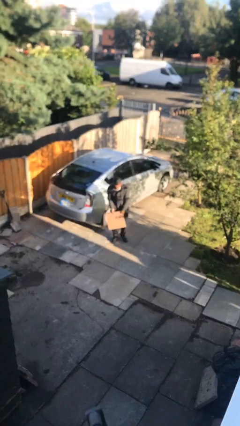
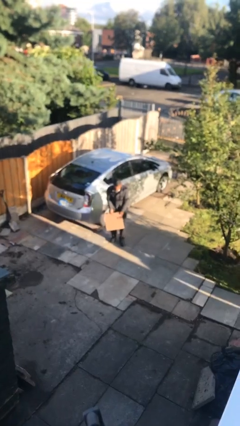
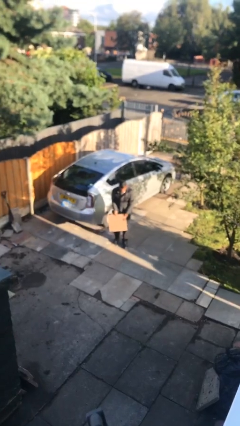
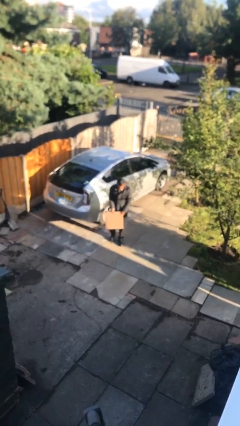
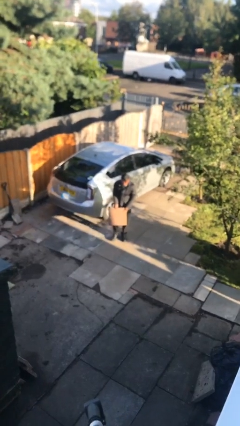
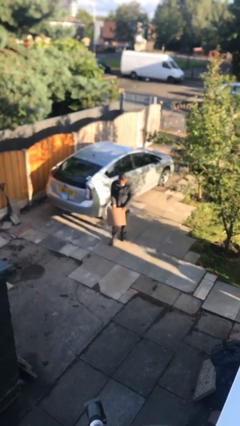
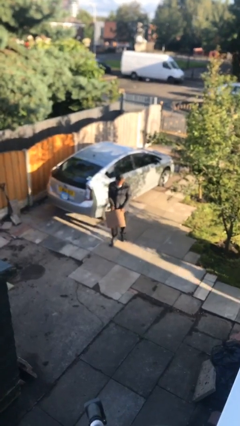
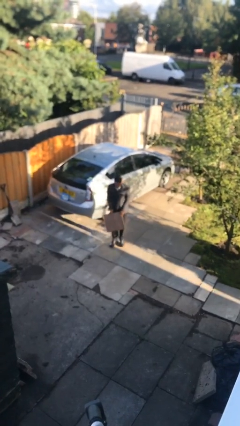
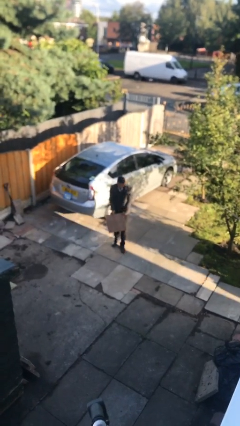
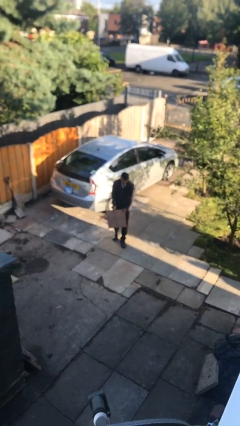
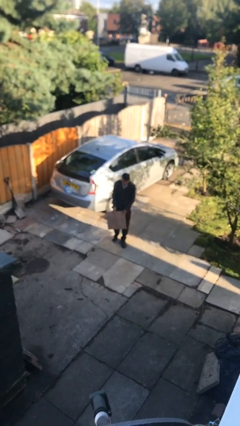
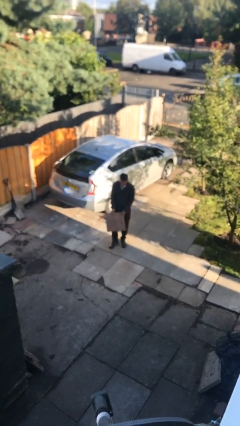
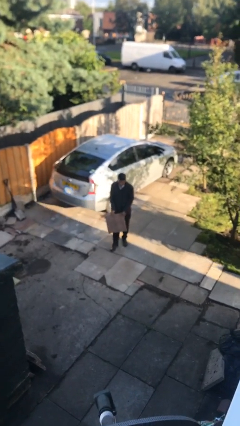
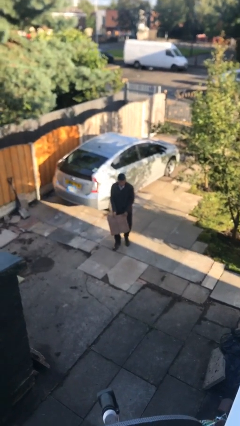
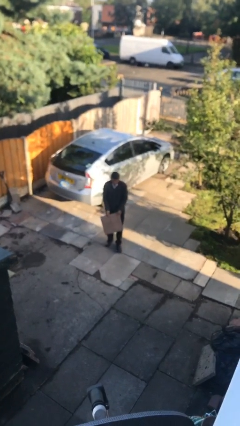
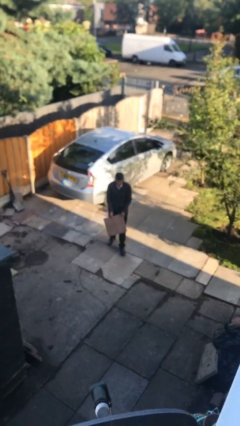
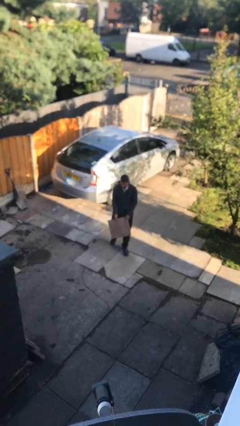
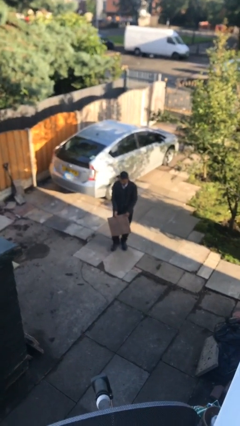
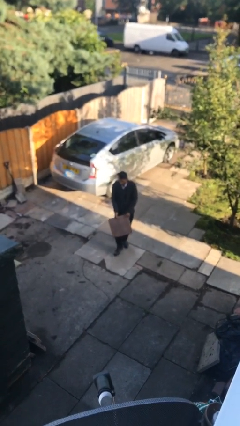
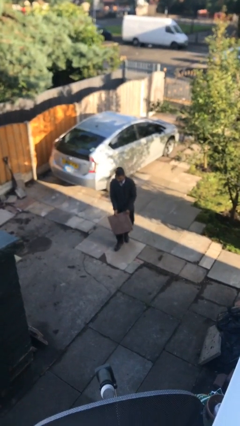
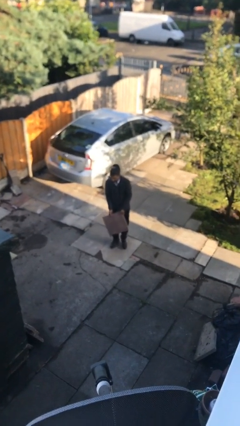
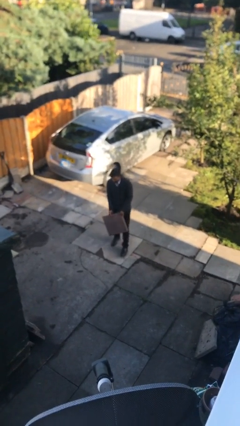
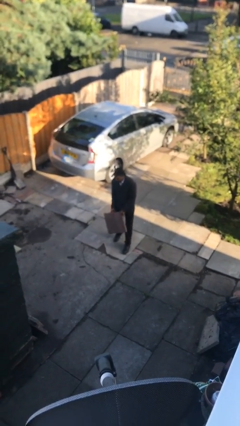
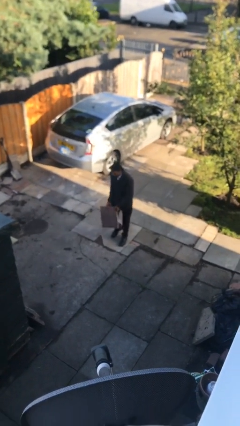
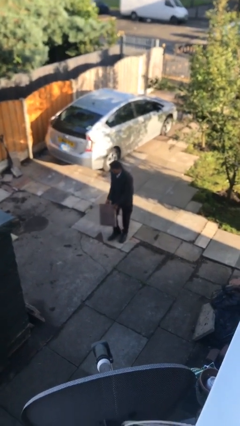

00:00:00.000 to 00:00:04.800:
person carries heavy object

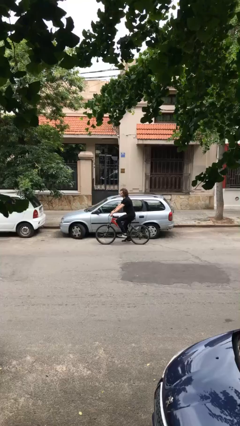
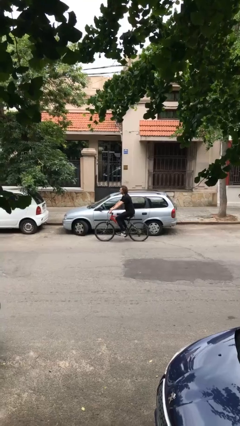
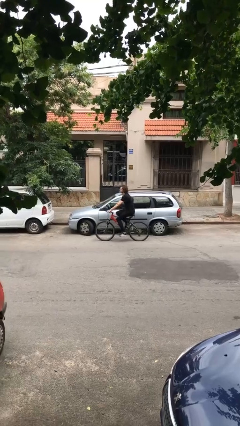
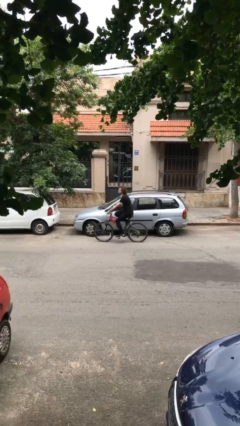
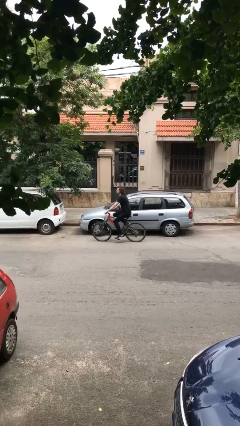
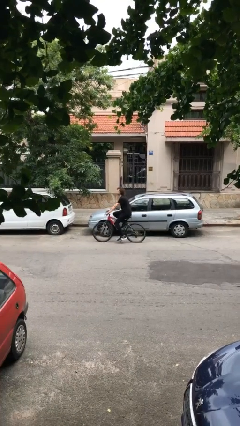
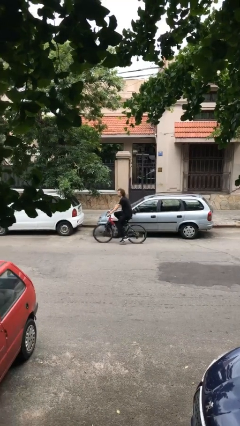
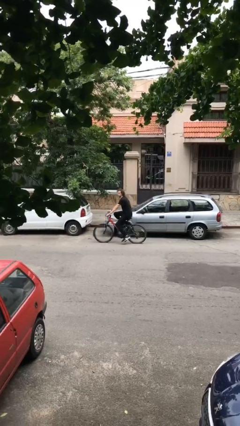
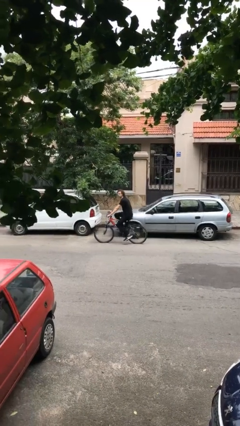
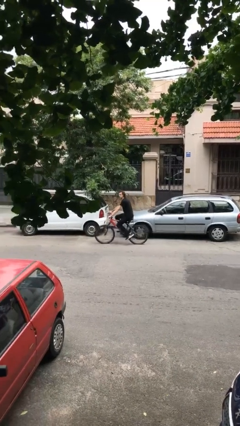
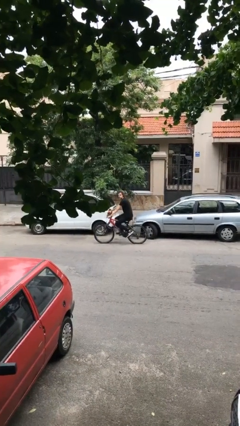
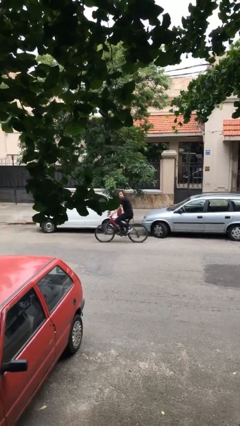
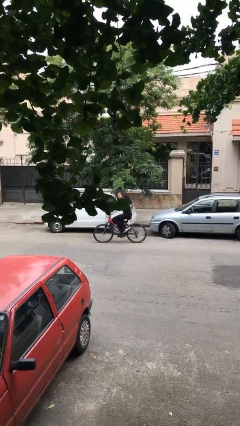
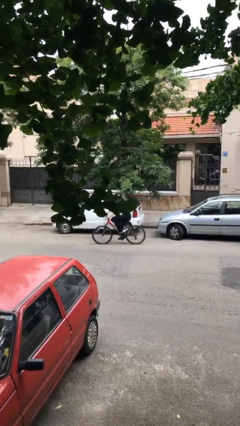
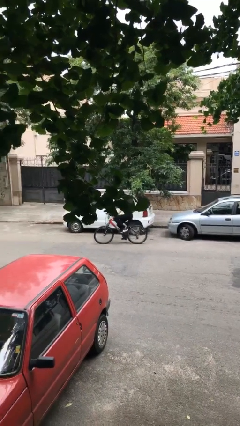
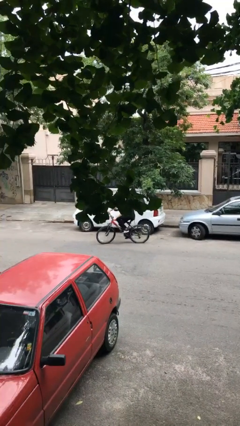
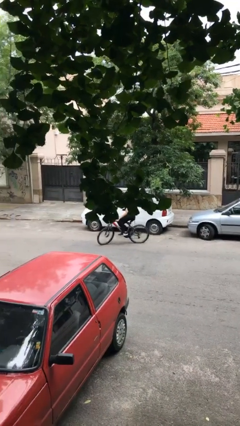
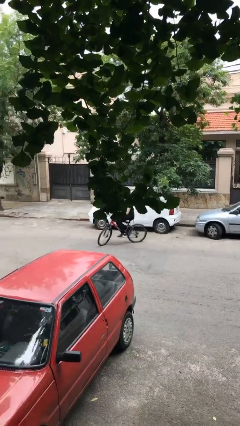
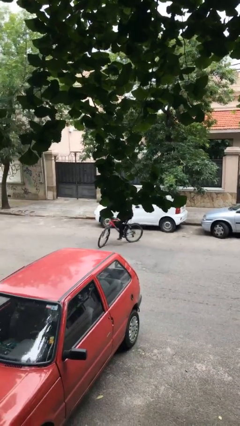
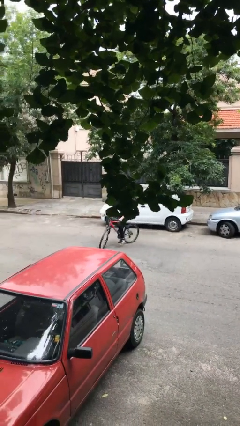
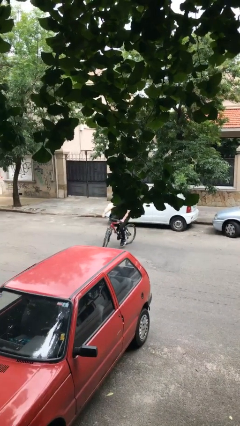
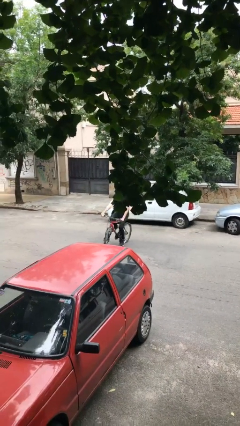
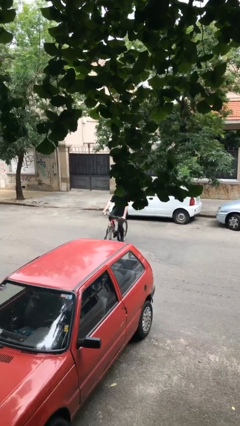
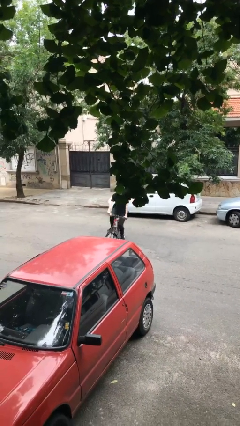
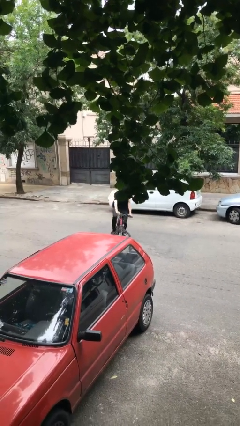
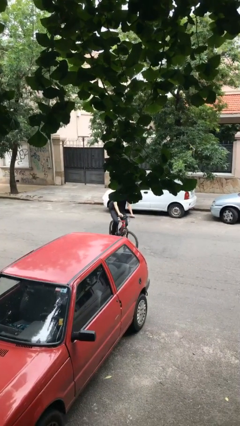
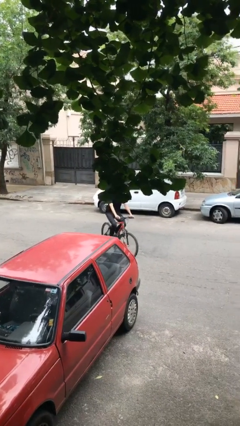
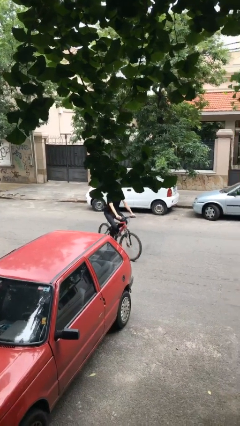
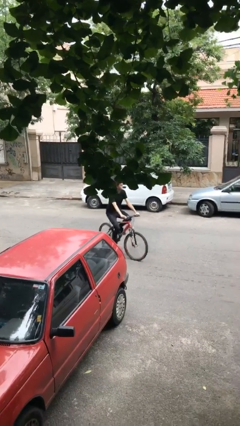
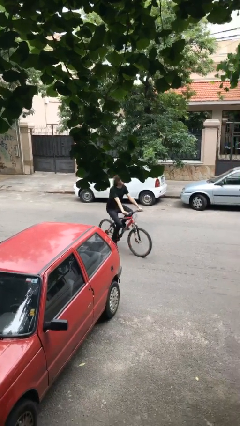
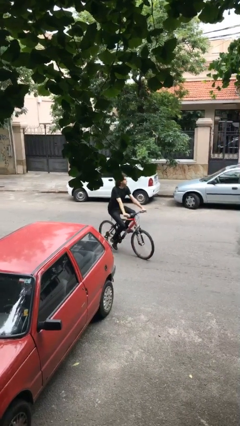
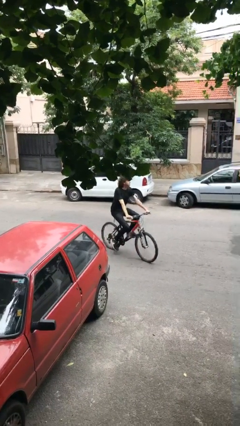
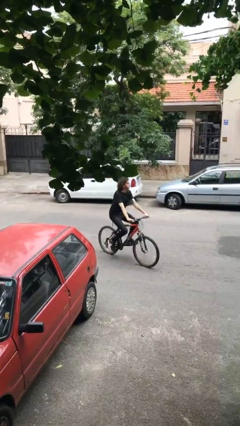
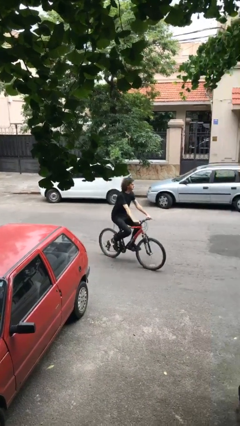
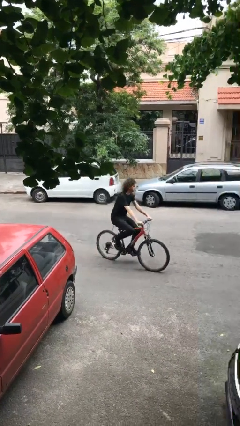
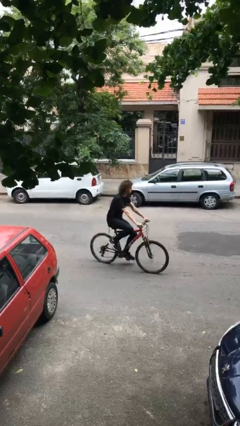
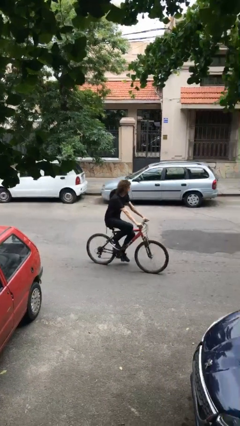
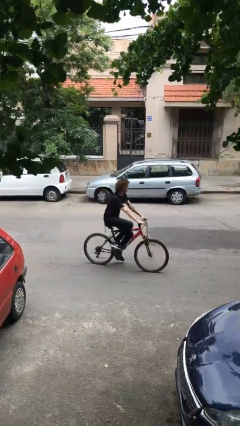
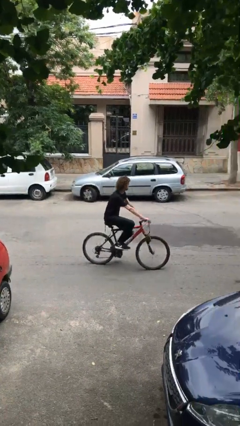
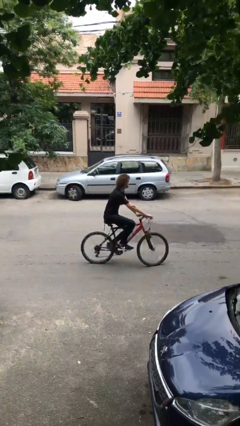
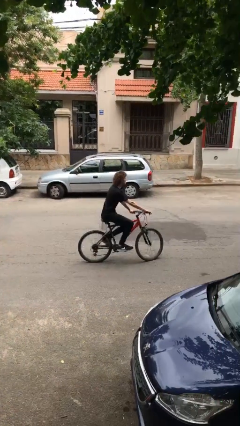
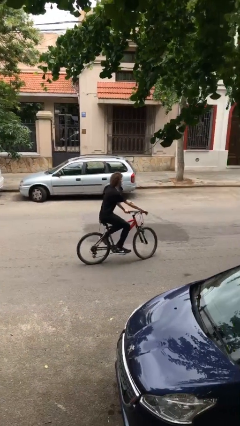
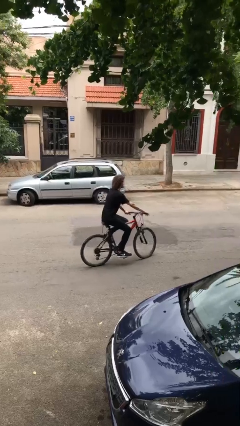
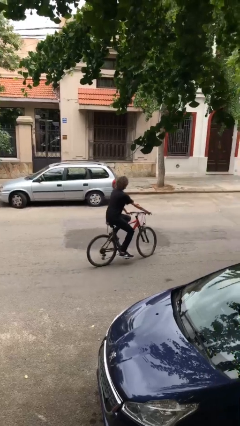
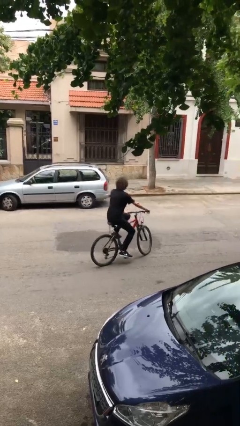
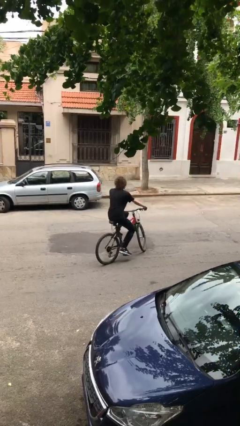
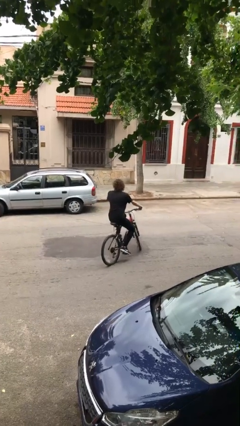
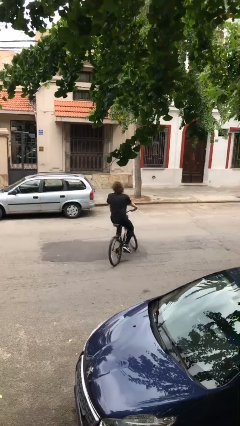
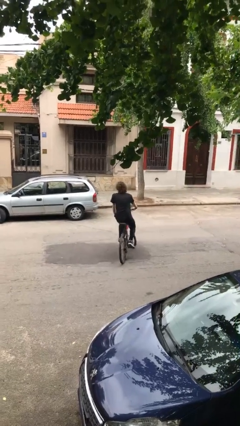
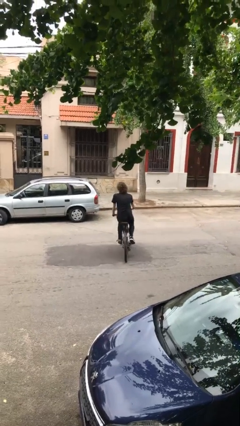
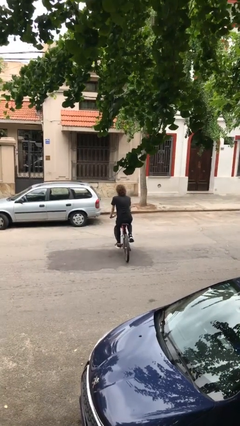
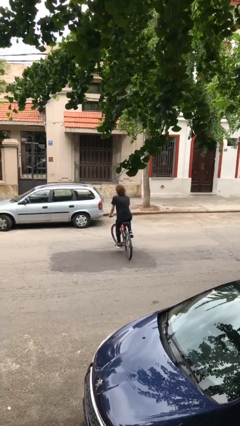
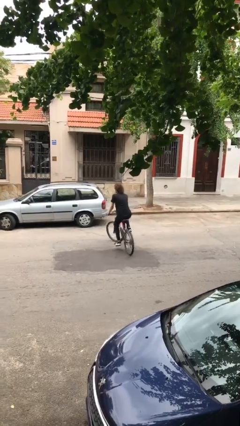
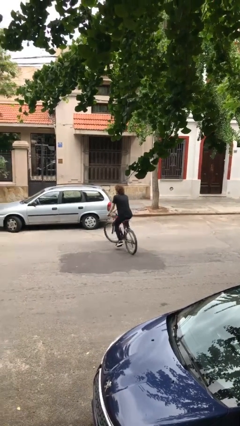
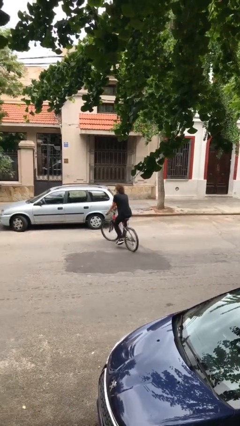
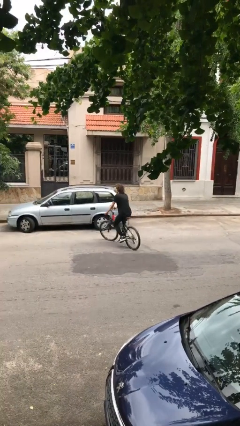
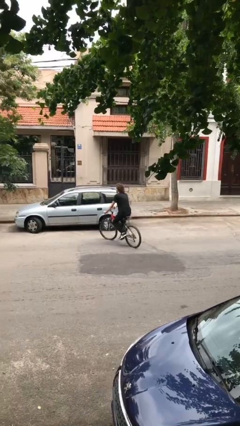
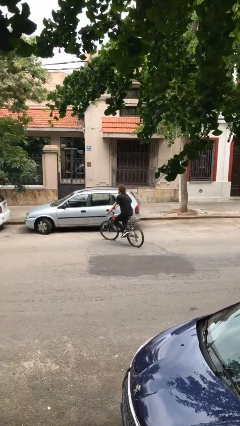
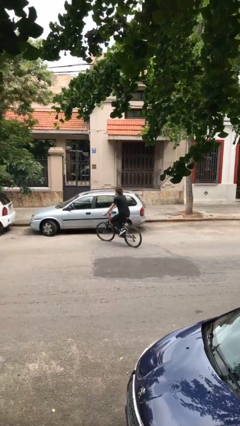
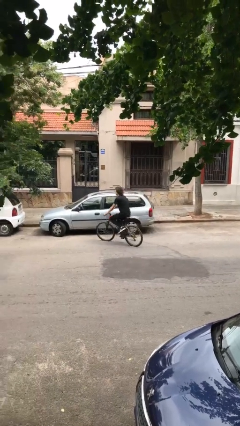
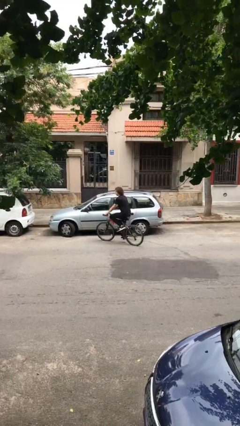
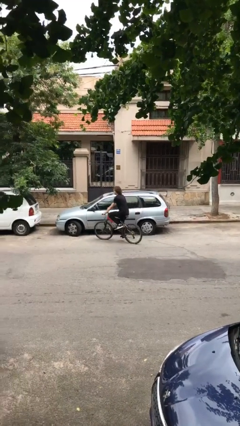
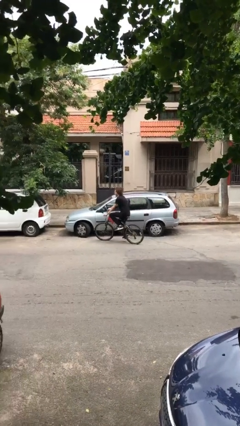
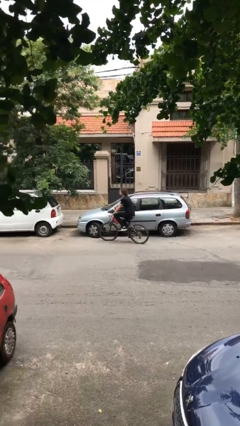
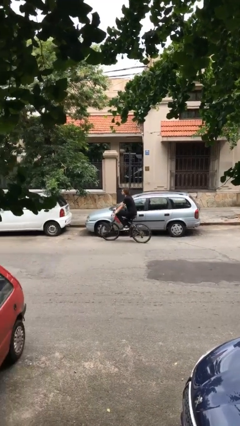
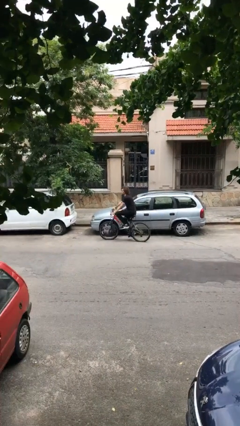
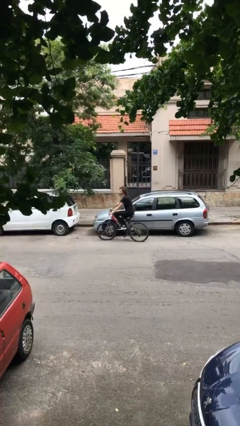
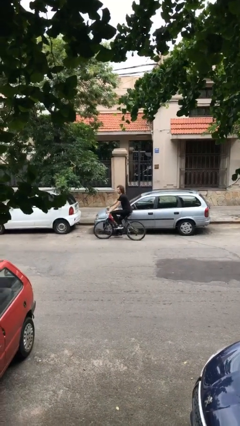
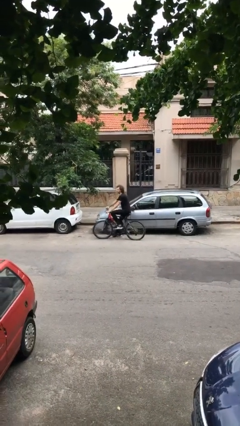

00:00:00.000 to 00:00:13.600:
person rides bicycle
